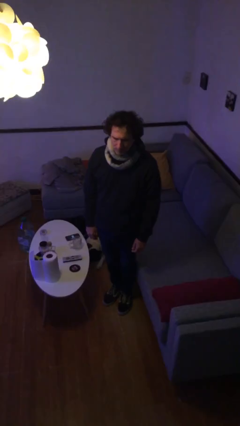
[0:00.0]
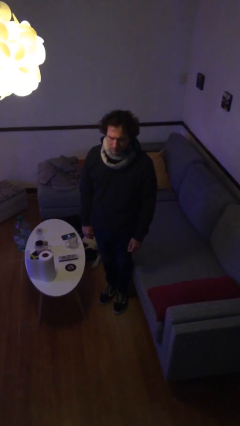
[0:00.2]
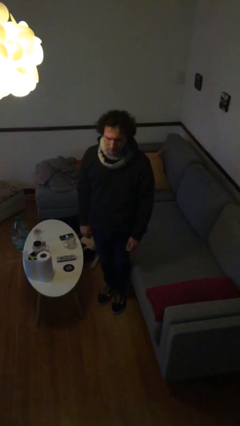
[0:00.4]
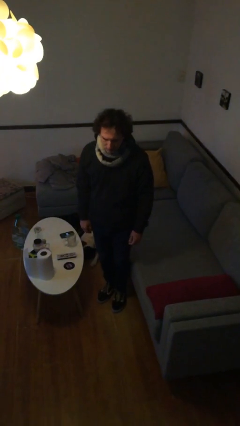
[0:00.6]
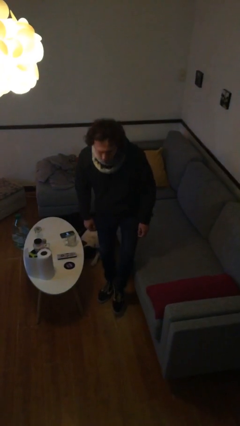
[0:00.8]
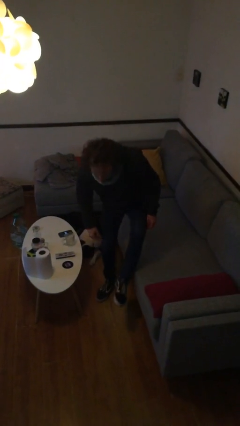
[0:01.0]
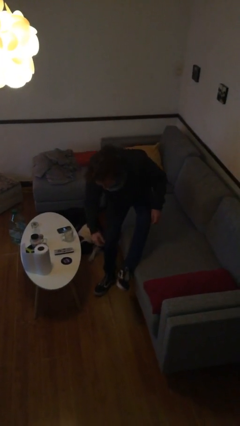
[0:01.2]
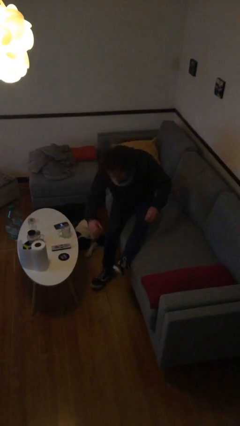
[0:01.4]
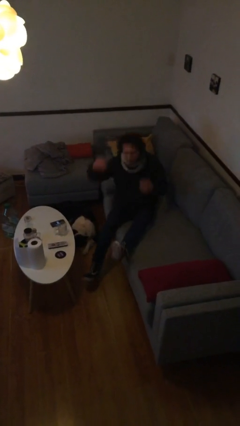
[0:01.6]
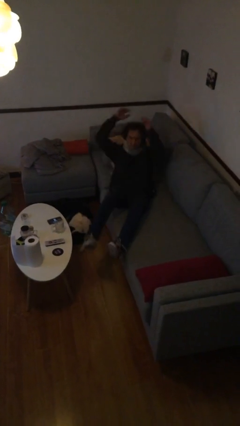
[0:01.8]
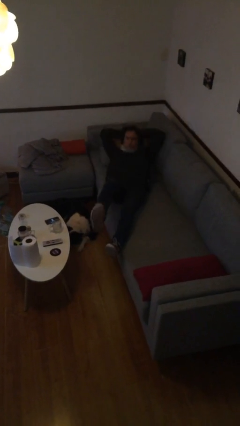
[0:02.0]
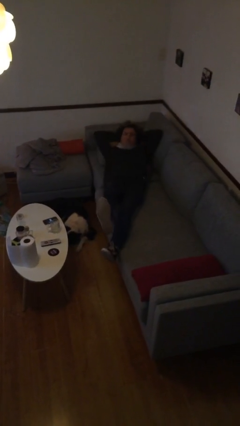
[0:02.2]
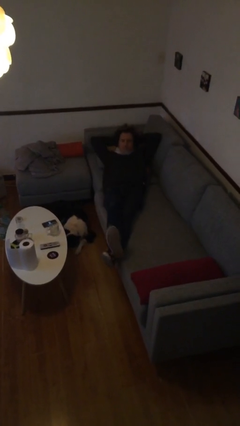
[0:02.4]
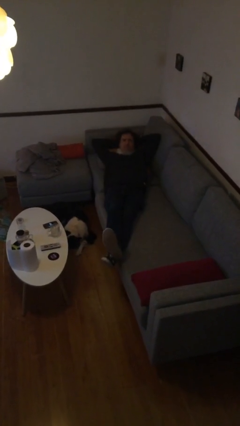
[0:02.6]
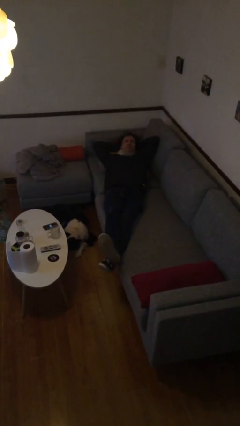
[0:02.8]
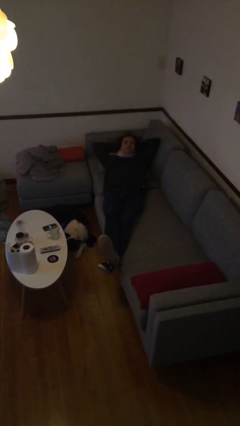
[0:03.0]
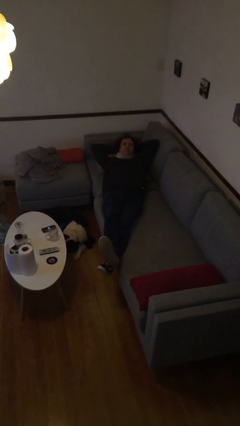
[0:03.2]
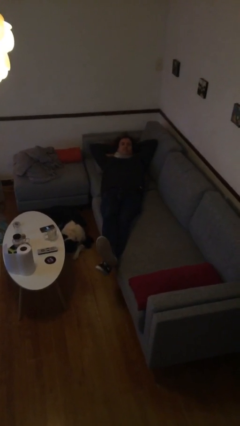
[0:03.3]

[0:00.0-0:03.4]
person lies down on couch

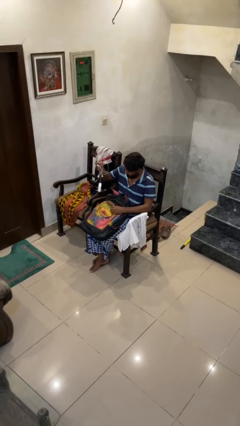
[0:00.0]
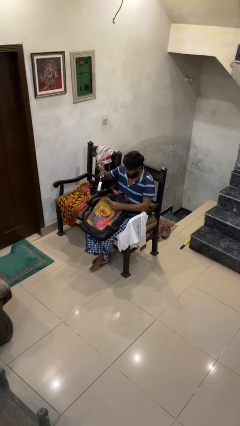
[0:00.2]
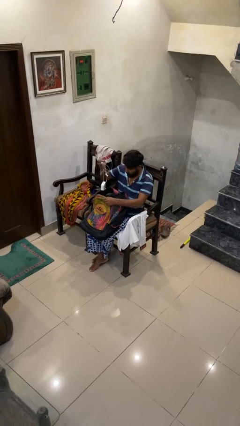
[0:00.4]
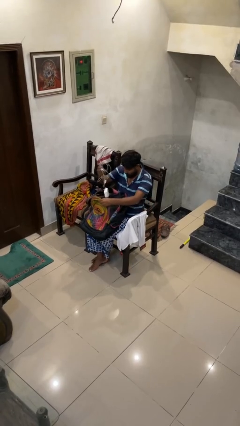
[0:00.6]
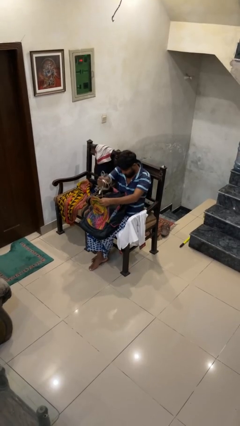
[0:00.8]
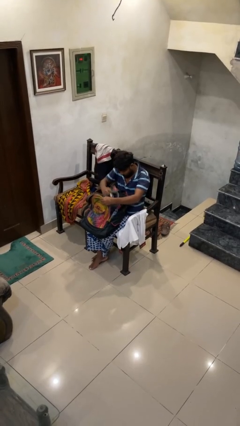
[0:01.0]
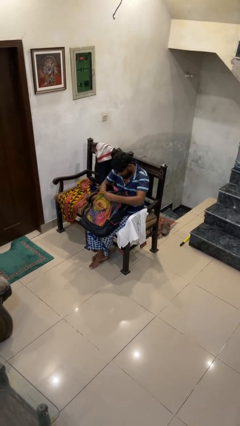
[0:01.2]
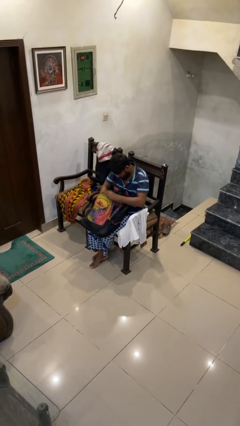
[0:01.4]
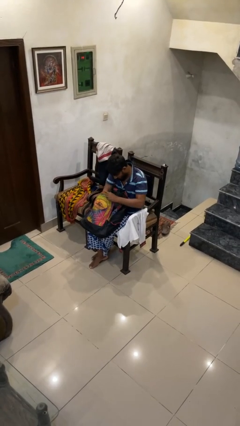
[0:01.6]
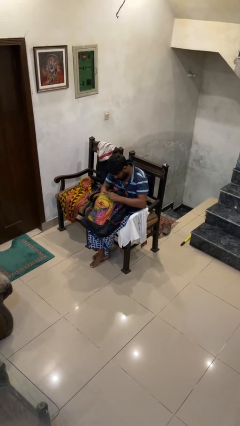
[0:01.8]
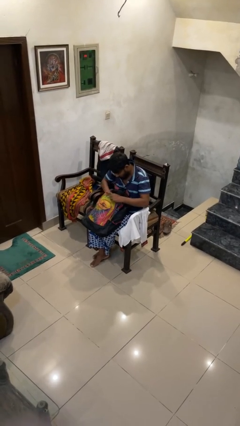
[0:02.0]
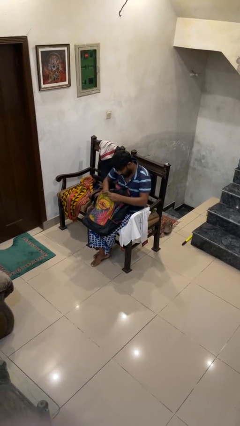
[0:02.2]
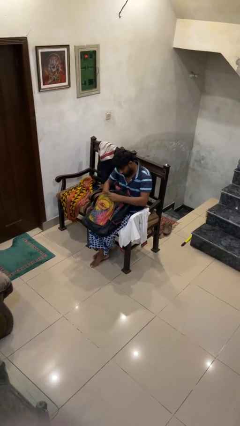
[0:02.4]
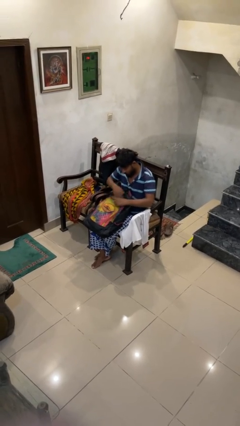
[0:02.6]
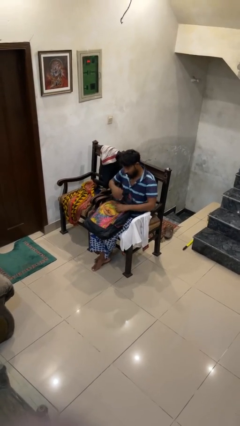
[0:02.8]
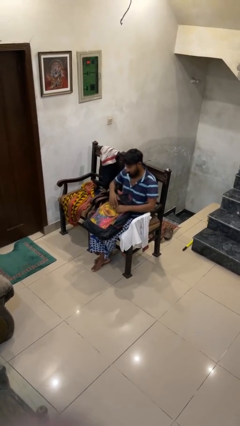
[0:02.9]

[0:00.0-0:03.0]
person puts object into backpack

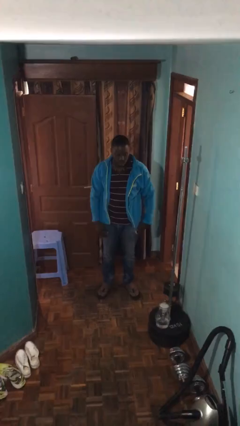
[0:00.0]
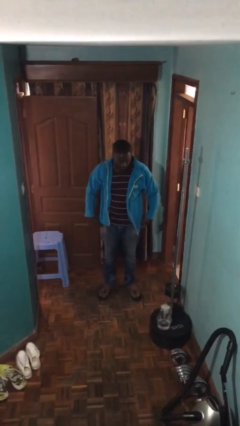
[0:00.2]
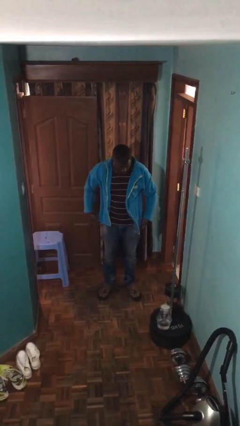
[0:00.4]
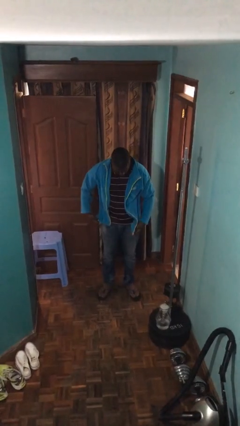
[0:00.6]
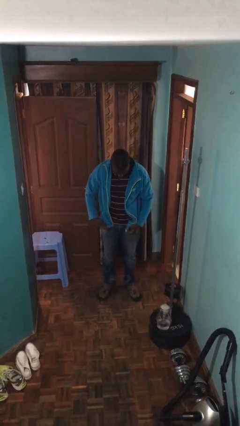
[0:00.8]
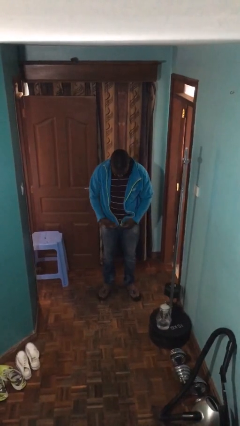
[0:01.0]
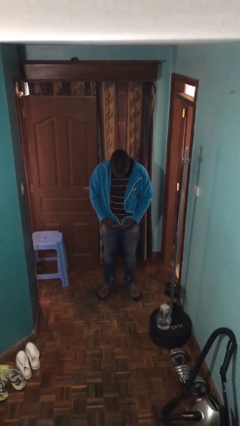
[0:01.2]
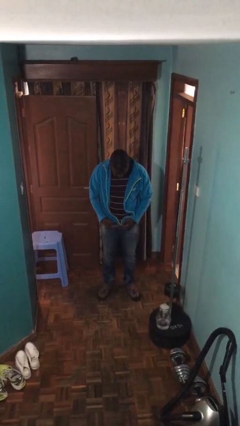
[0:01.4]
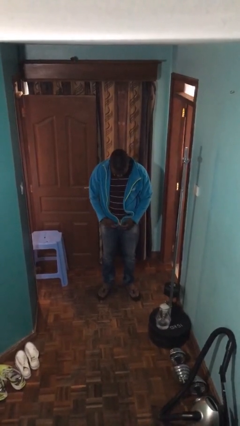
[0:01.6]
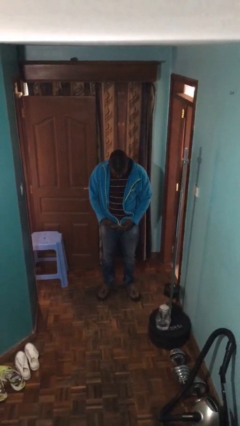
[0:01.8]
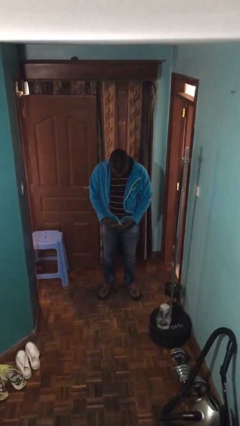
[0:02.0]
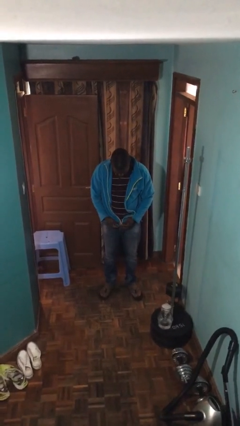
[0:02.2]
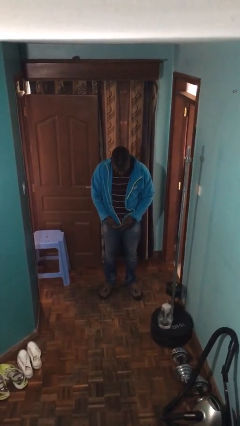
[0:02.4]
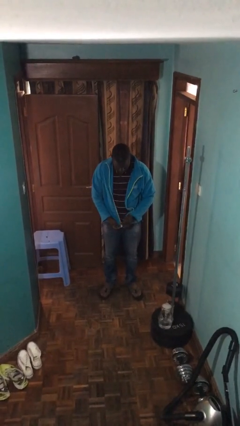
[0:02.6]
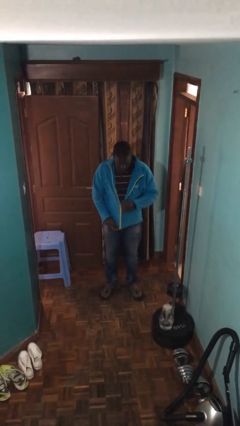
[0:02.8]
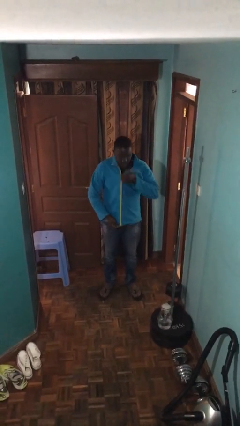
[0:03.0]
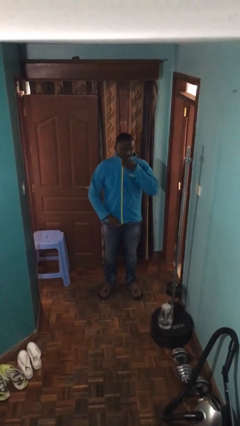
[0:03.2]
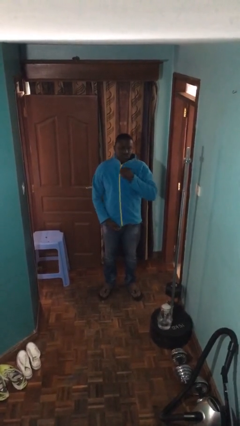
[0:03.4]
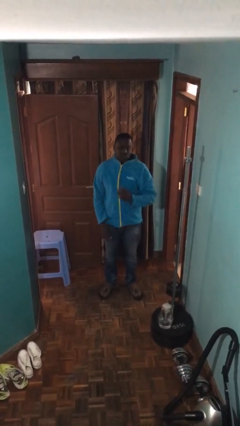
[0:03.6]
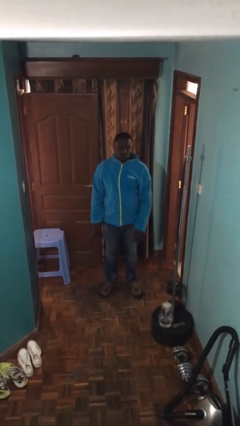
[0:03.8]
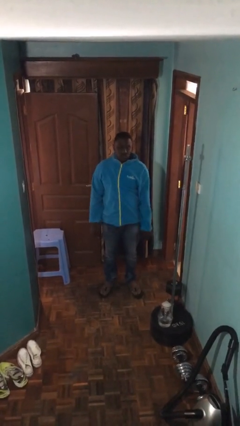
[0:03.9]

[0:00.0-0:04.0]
person zips up jacket

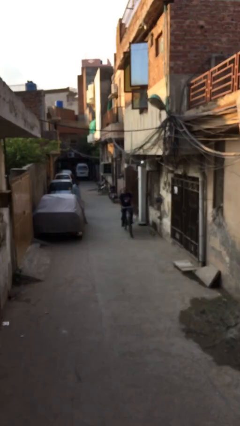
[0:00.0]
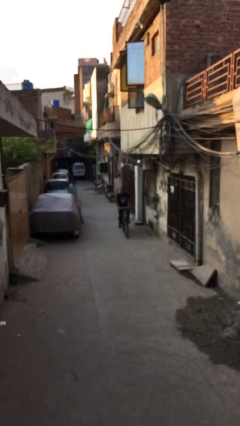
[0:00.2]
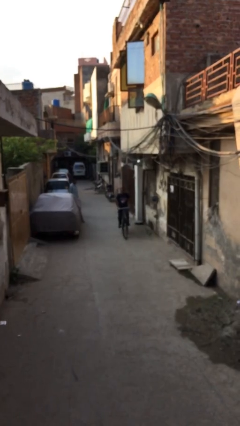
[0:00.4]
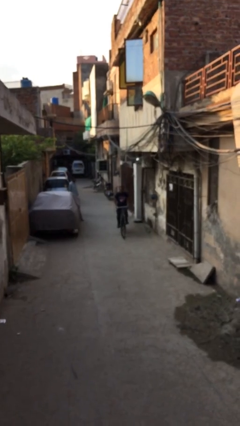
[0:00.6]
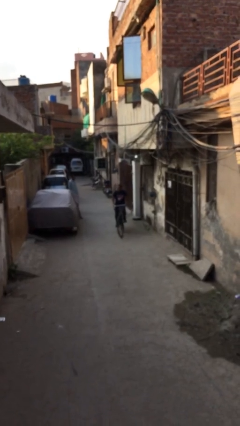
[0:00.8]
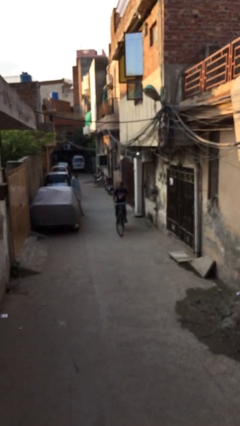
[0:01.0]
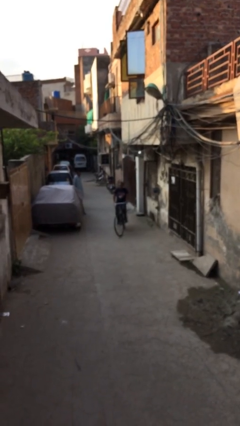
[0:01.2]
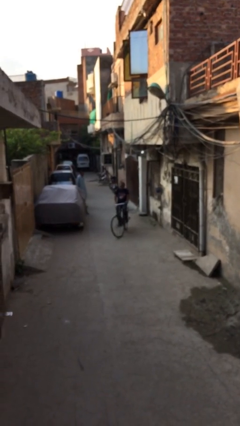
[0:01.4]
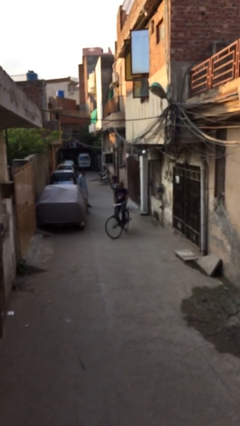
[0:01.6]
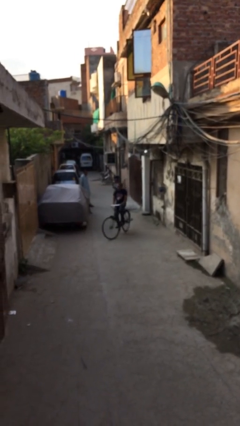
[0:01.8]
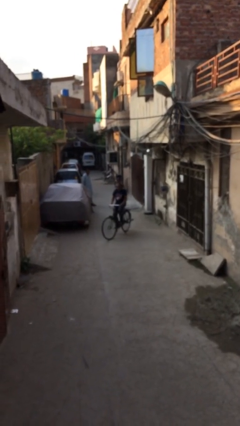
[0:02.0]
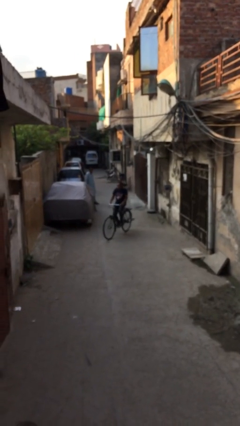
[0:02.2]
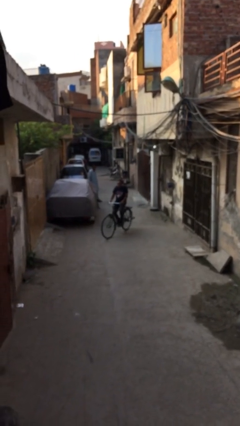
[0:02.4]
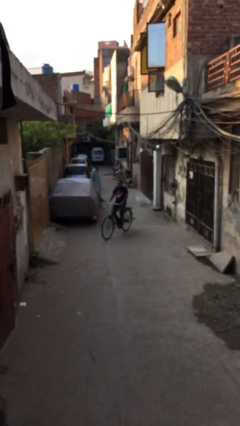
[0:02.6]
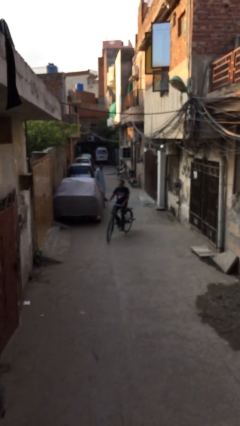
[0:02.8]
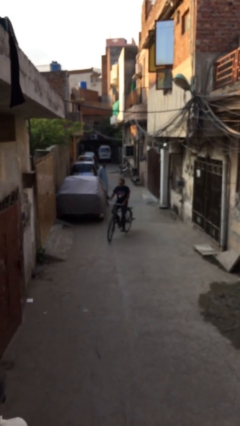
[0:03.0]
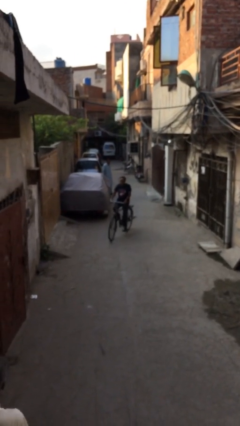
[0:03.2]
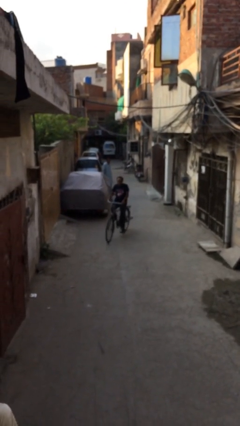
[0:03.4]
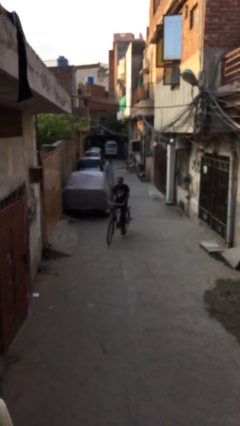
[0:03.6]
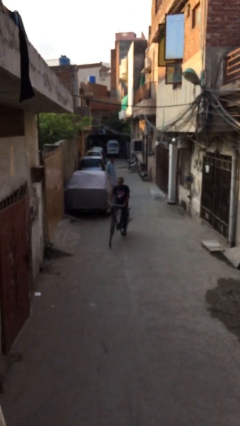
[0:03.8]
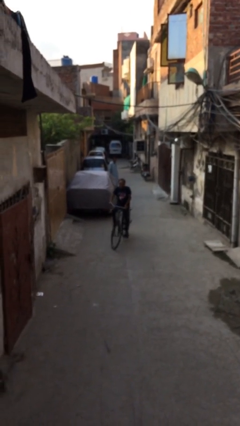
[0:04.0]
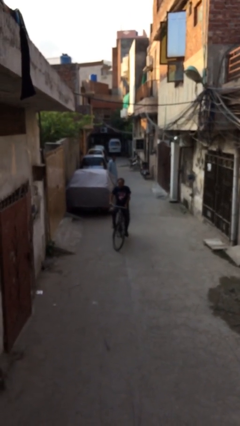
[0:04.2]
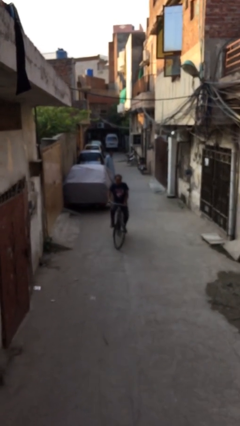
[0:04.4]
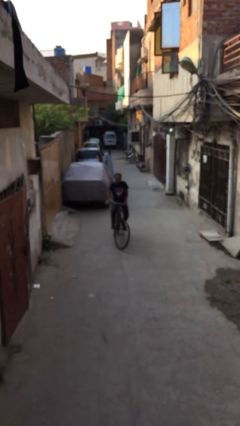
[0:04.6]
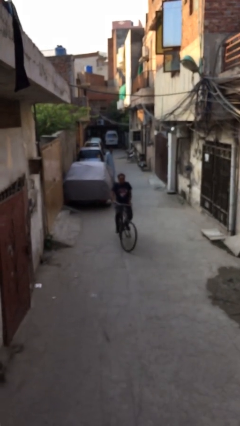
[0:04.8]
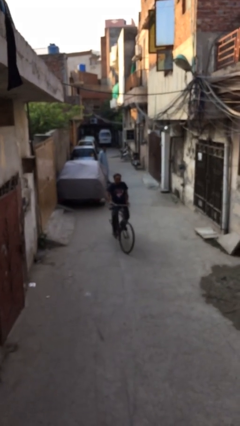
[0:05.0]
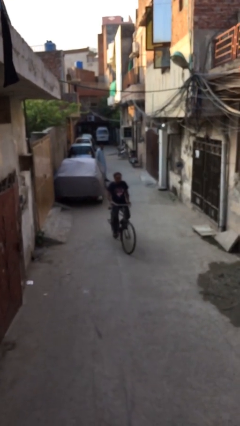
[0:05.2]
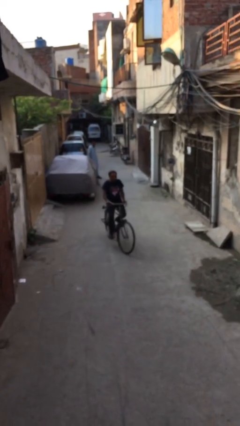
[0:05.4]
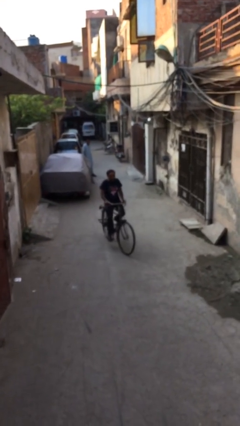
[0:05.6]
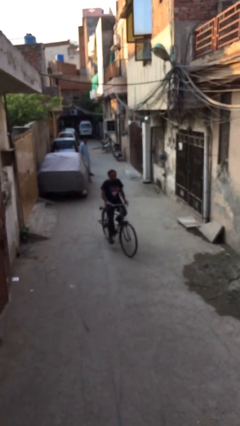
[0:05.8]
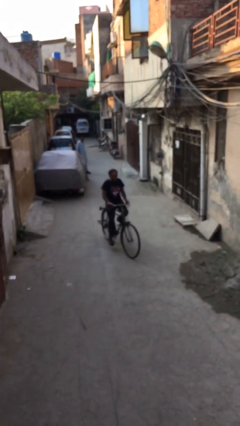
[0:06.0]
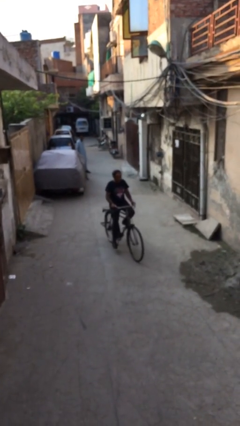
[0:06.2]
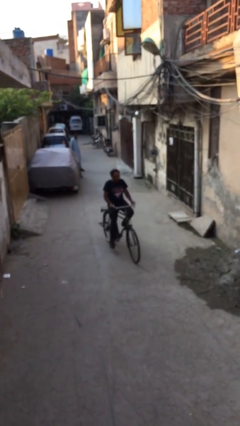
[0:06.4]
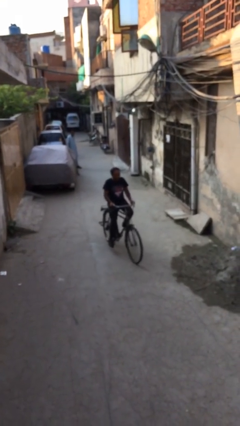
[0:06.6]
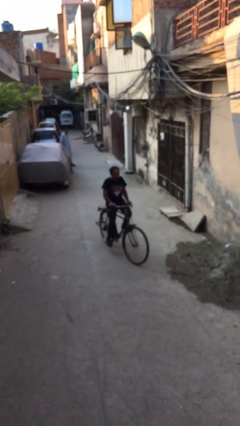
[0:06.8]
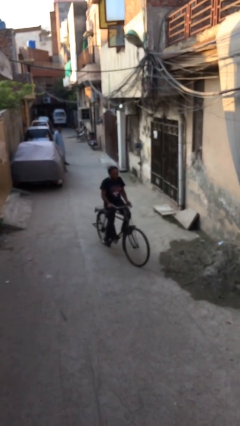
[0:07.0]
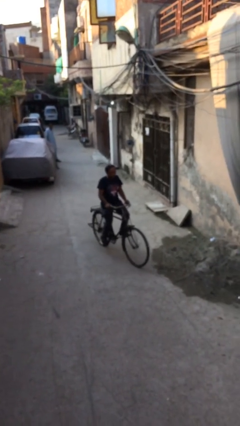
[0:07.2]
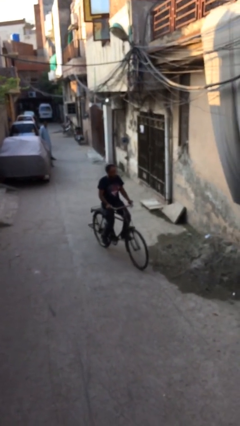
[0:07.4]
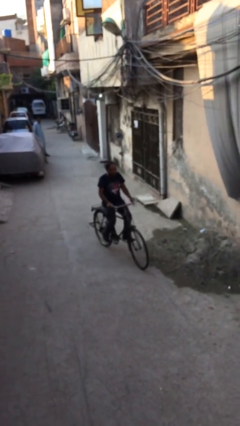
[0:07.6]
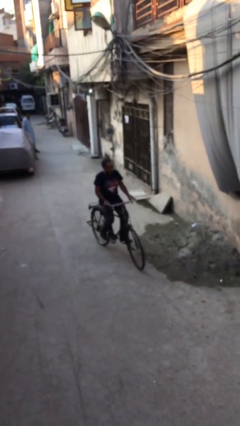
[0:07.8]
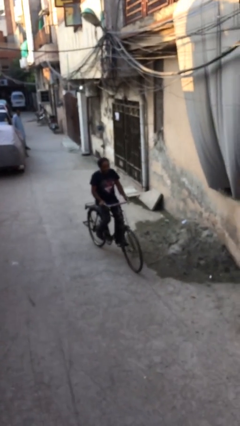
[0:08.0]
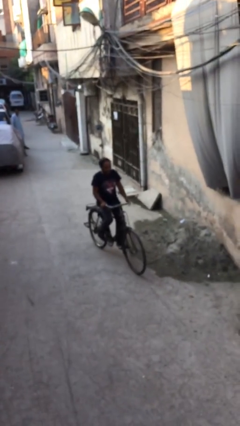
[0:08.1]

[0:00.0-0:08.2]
person rides bicycle
